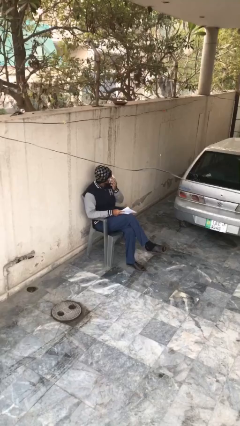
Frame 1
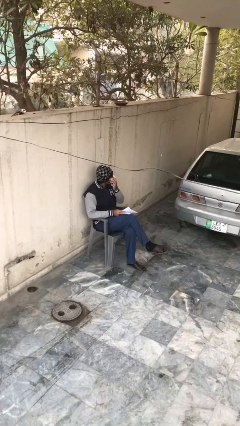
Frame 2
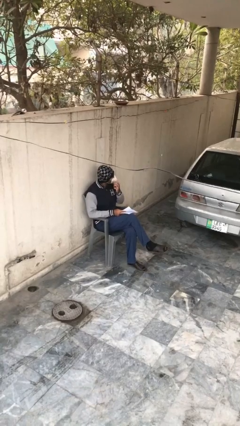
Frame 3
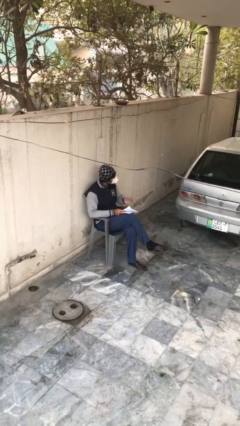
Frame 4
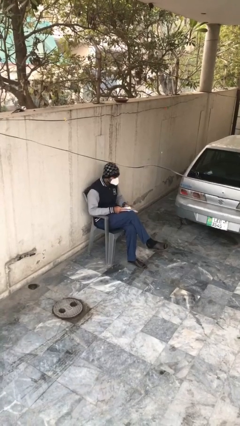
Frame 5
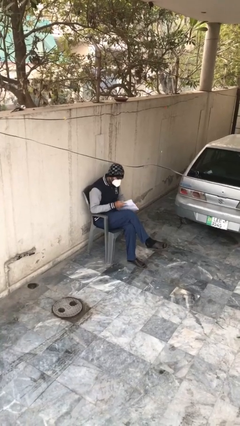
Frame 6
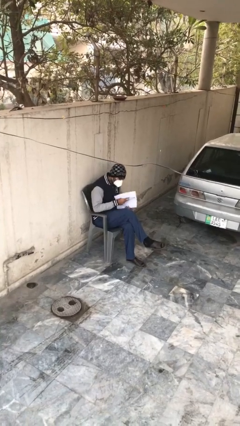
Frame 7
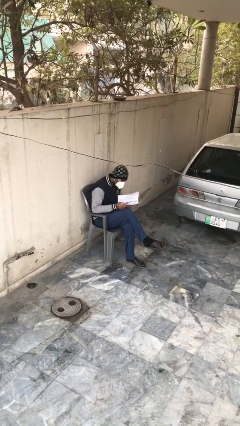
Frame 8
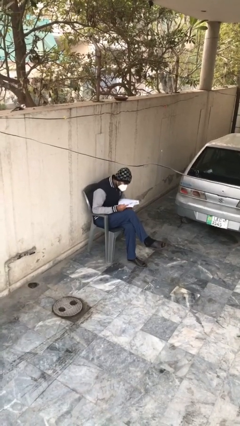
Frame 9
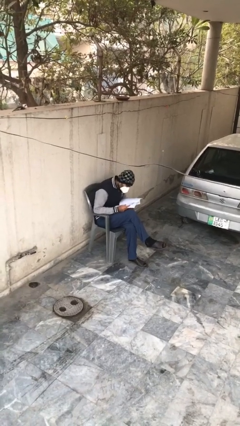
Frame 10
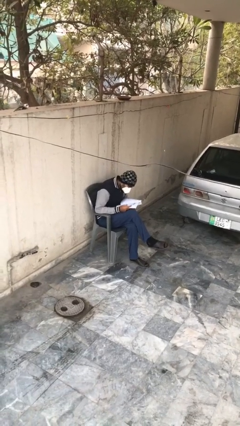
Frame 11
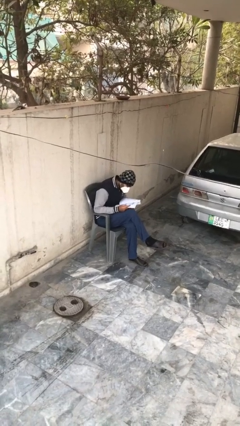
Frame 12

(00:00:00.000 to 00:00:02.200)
person reads document

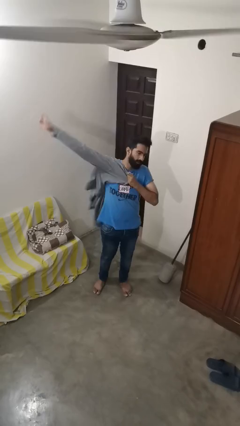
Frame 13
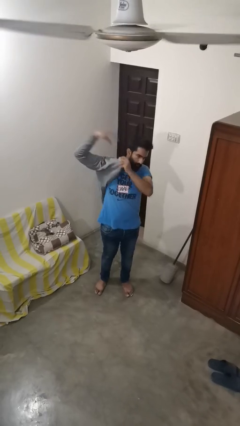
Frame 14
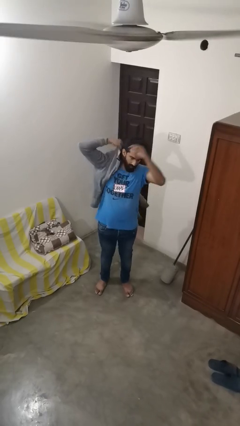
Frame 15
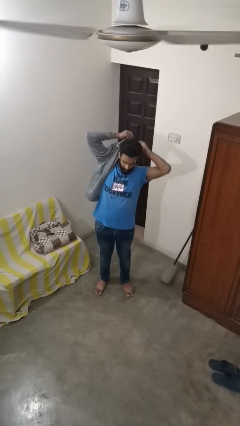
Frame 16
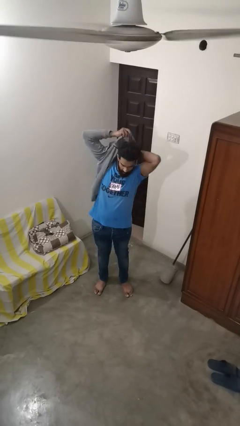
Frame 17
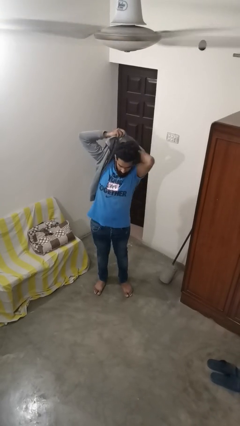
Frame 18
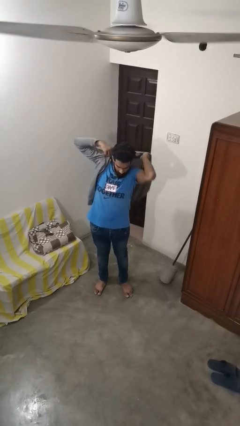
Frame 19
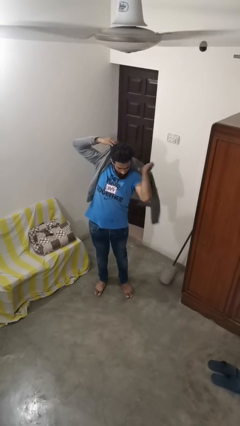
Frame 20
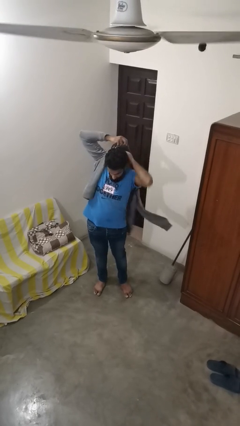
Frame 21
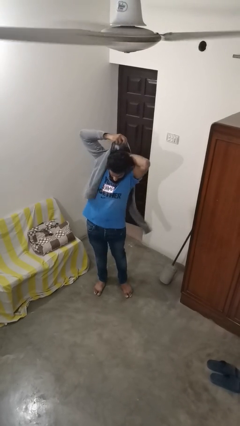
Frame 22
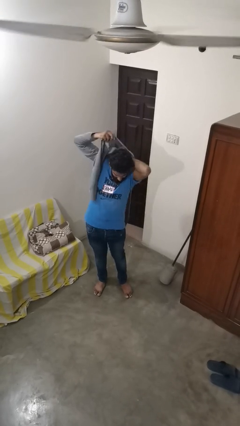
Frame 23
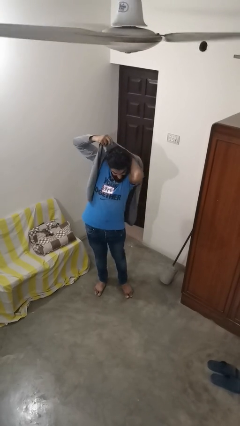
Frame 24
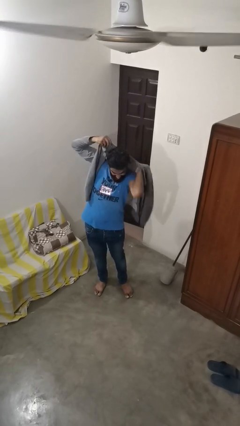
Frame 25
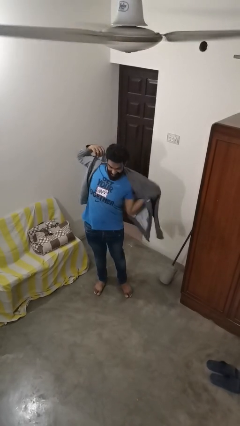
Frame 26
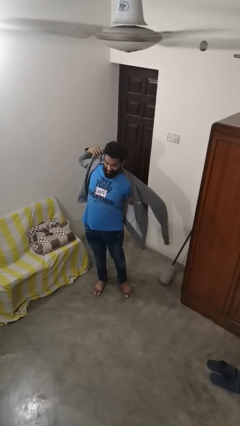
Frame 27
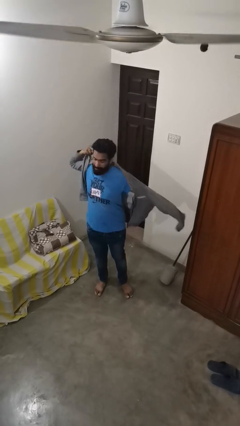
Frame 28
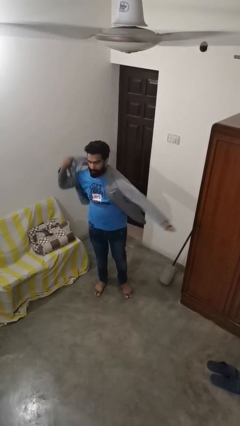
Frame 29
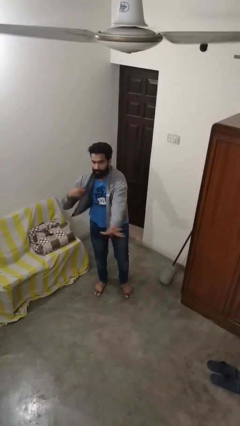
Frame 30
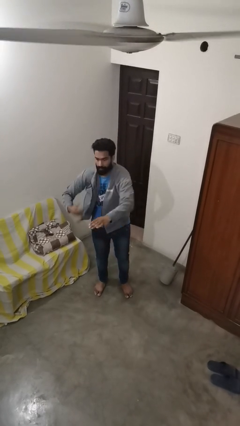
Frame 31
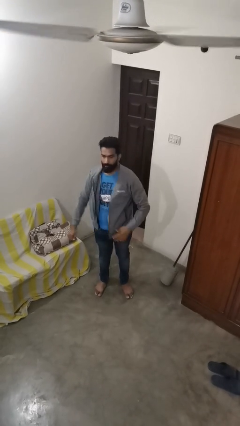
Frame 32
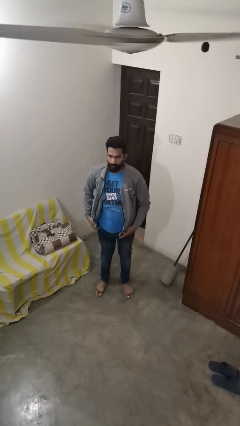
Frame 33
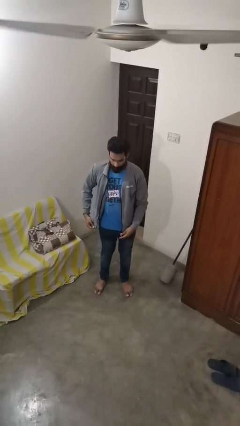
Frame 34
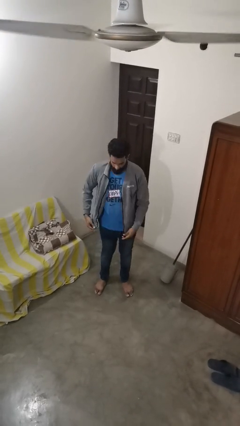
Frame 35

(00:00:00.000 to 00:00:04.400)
person puts on jacket

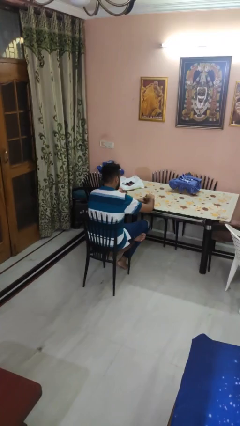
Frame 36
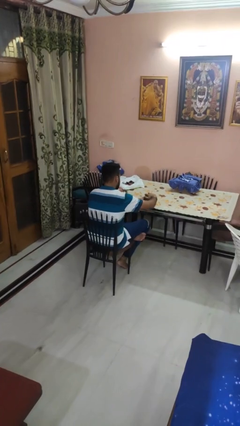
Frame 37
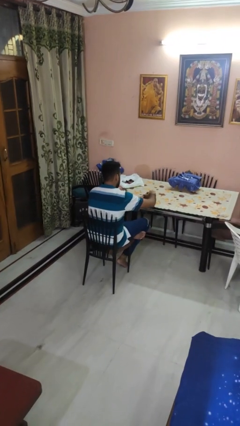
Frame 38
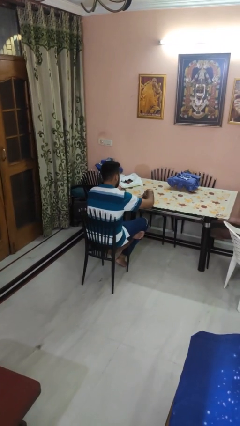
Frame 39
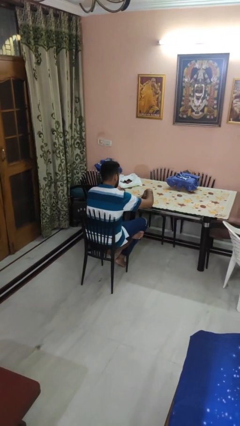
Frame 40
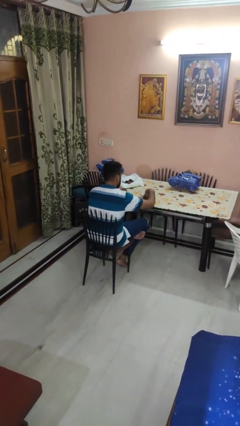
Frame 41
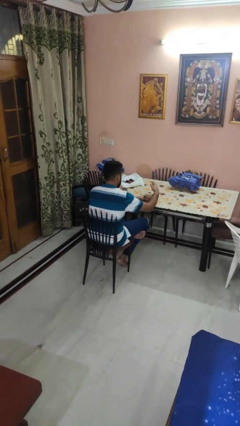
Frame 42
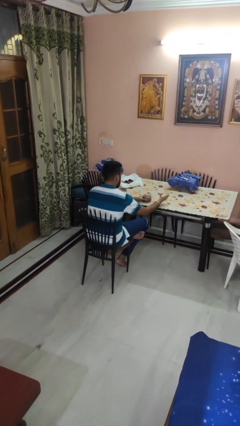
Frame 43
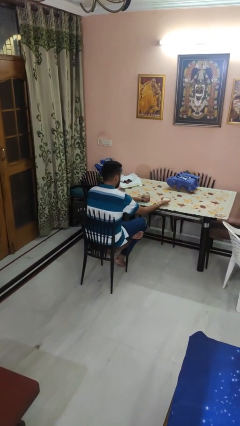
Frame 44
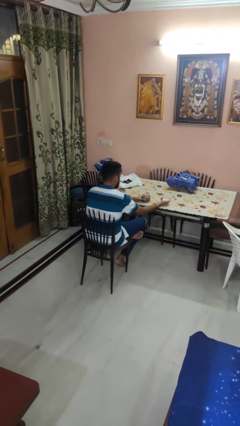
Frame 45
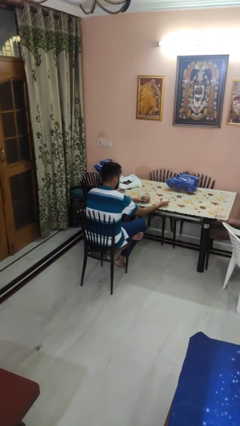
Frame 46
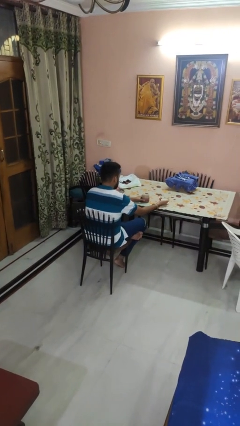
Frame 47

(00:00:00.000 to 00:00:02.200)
person opens jar

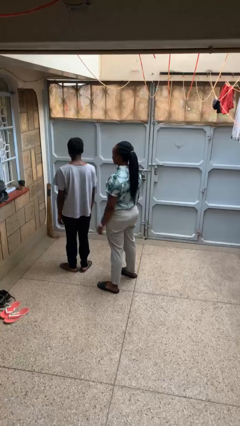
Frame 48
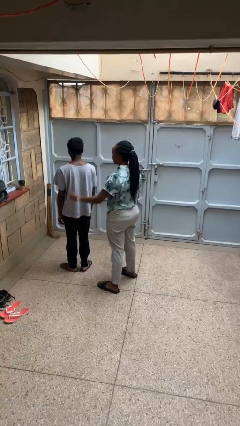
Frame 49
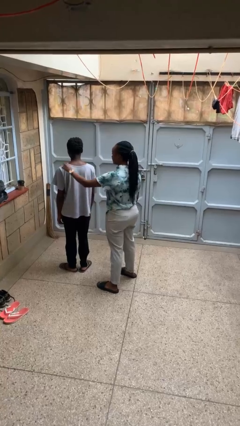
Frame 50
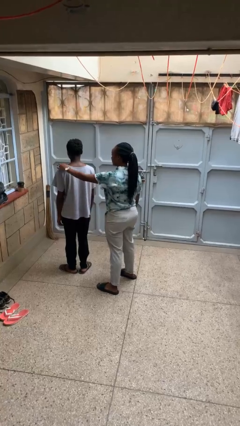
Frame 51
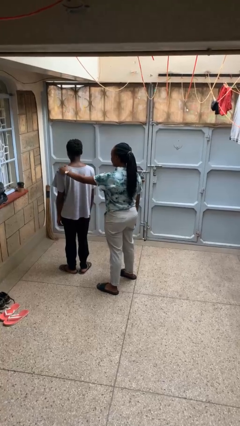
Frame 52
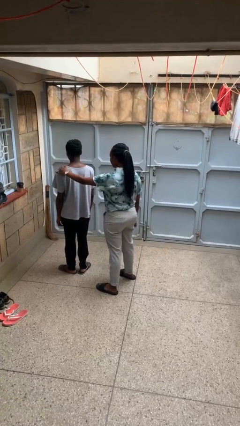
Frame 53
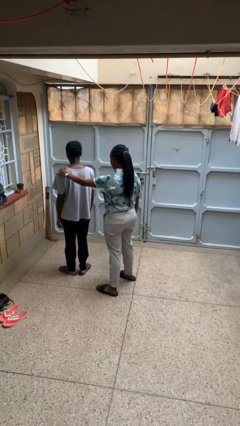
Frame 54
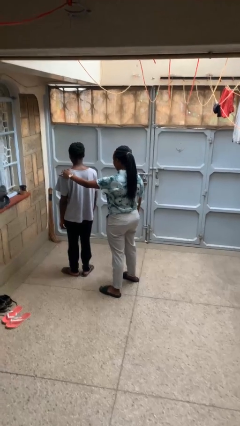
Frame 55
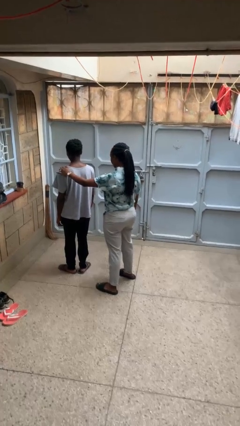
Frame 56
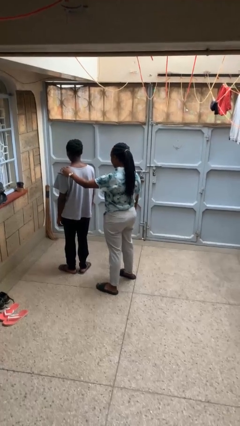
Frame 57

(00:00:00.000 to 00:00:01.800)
person grabs person by shoulder

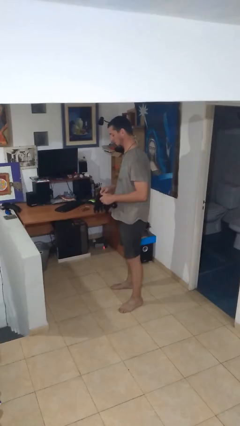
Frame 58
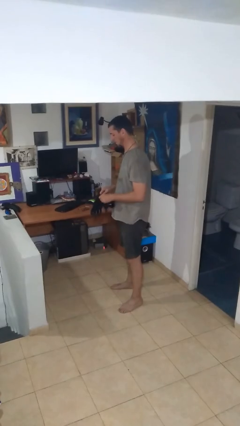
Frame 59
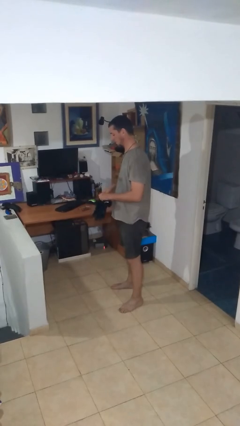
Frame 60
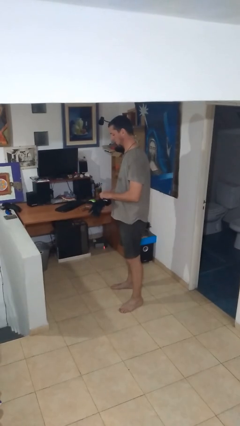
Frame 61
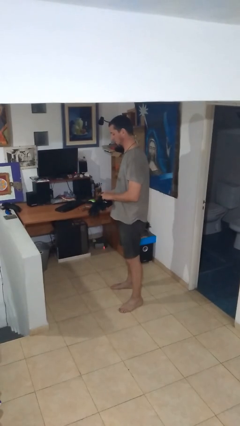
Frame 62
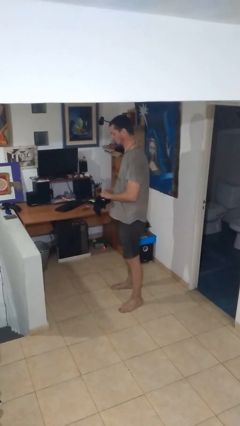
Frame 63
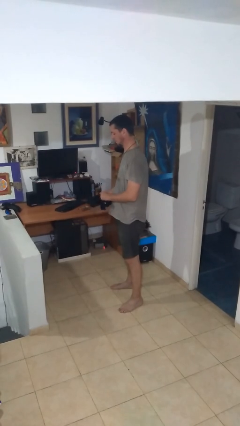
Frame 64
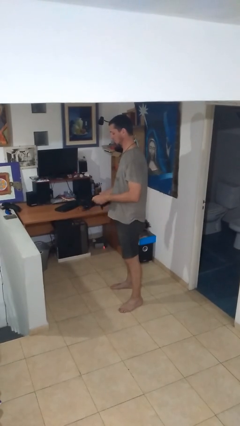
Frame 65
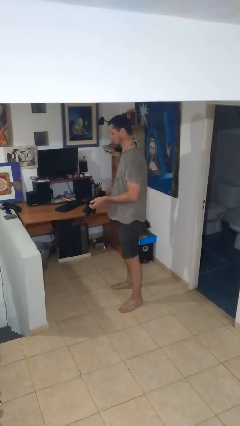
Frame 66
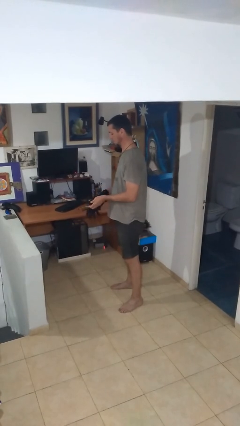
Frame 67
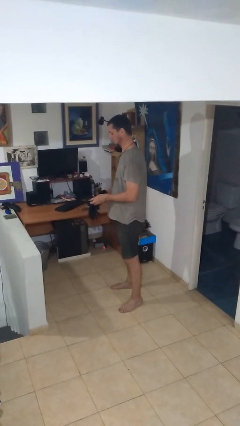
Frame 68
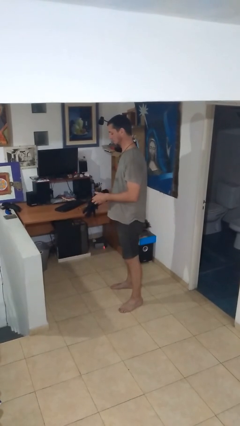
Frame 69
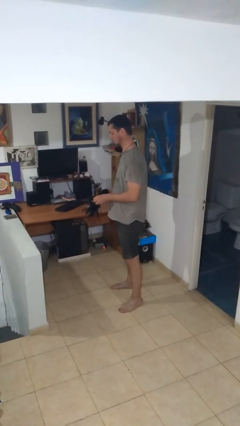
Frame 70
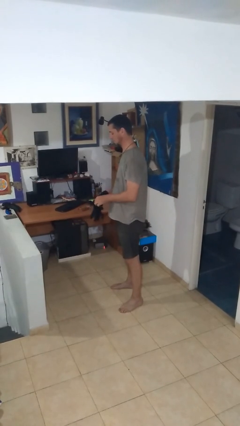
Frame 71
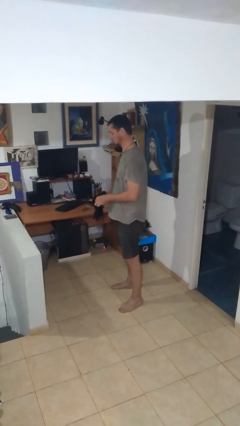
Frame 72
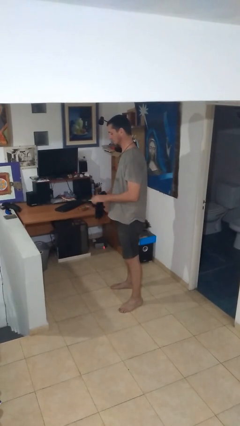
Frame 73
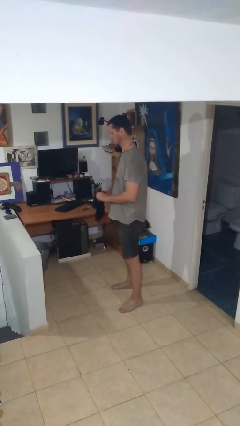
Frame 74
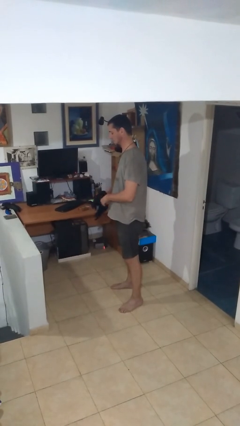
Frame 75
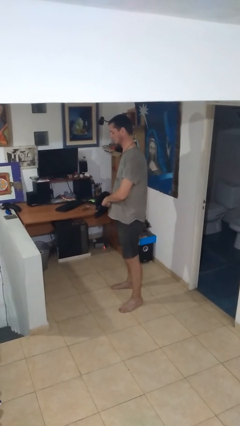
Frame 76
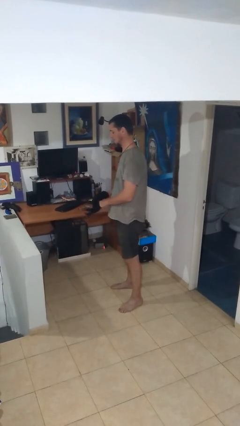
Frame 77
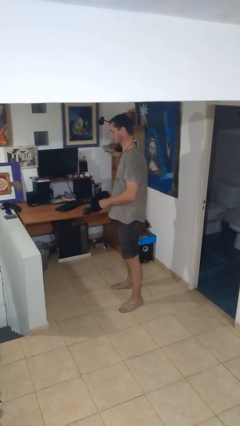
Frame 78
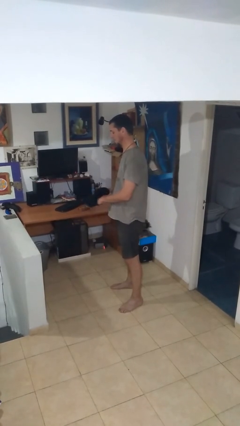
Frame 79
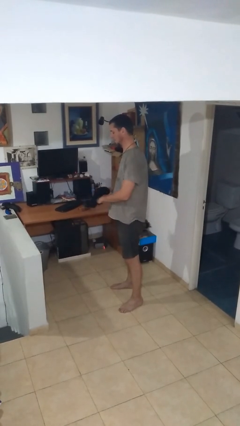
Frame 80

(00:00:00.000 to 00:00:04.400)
person puts on gloves

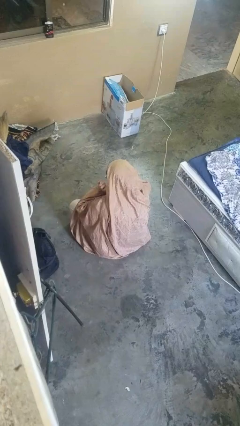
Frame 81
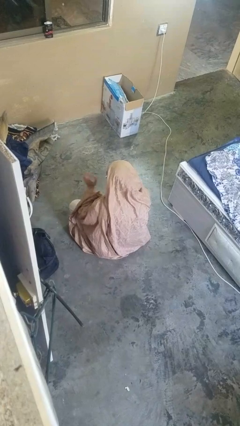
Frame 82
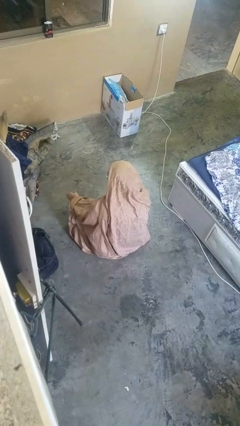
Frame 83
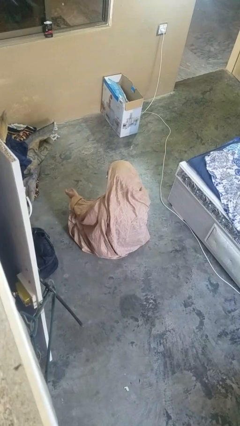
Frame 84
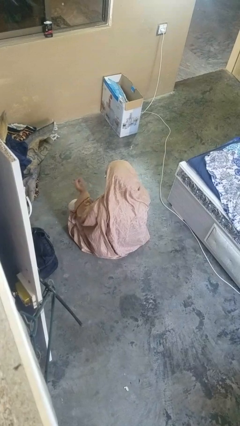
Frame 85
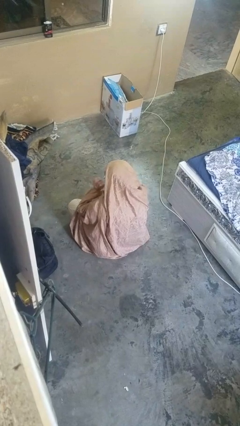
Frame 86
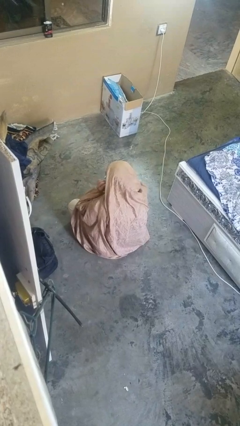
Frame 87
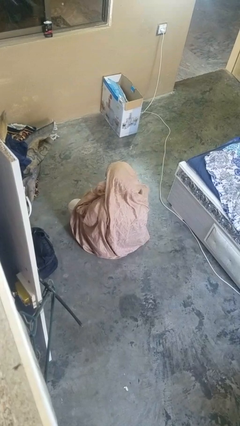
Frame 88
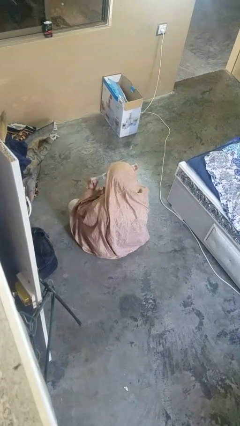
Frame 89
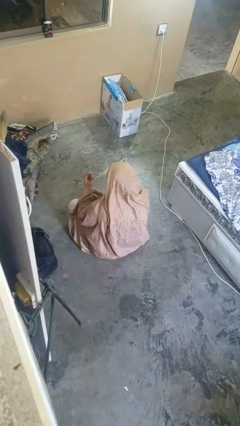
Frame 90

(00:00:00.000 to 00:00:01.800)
person takes off facemask

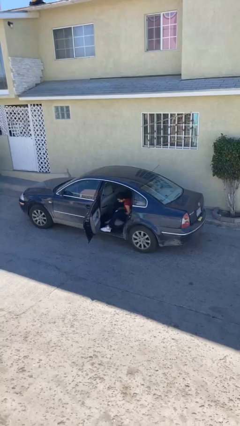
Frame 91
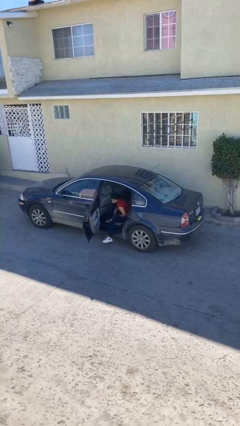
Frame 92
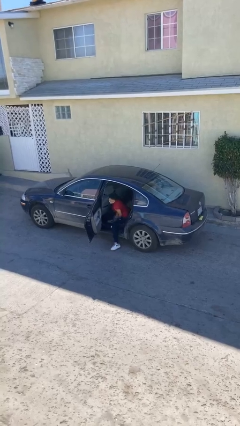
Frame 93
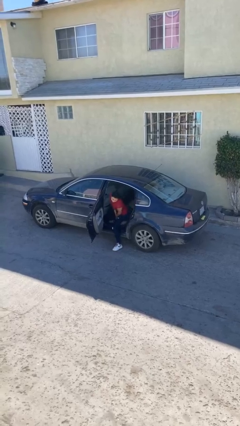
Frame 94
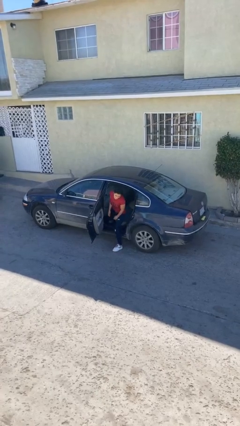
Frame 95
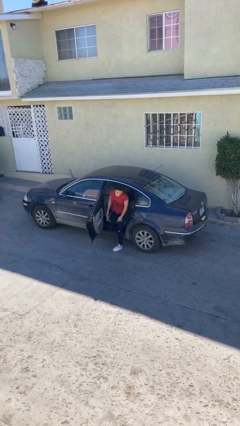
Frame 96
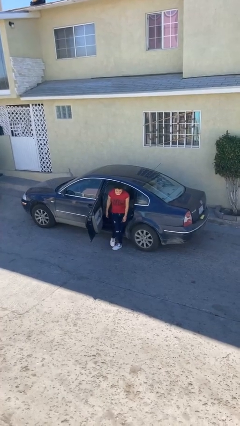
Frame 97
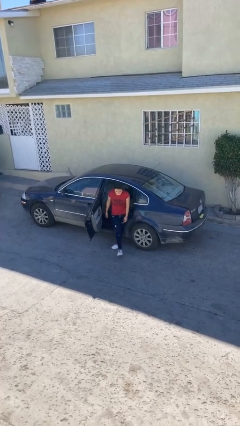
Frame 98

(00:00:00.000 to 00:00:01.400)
person exits car
